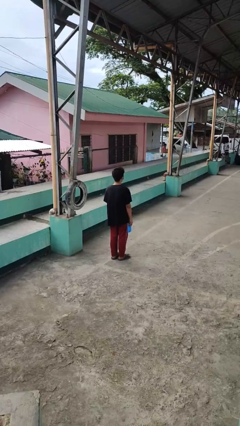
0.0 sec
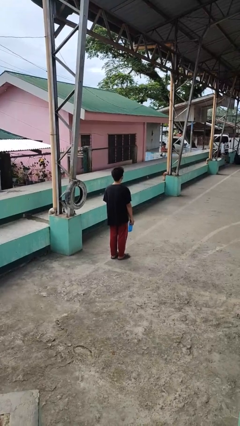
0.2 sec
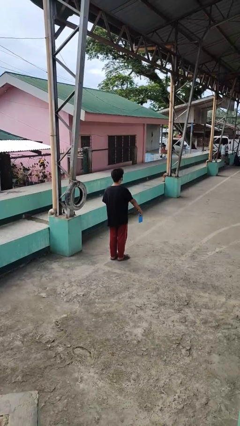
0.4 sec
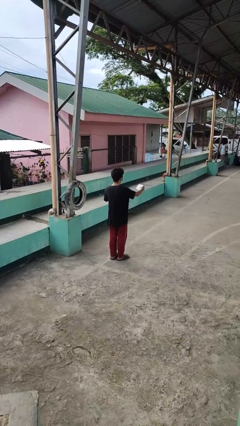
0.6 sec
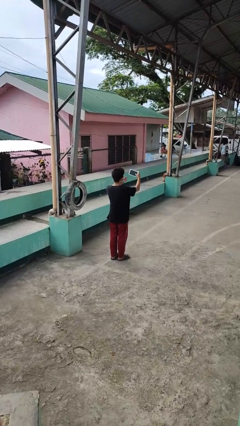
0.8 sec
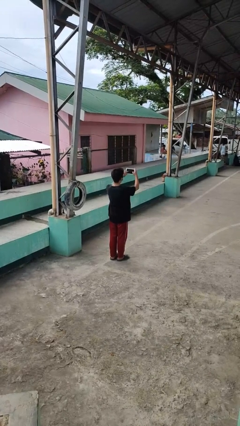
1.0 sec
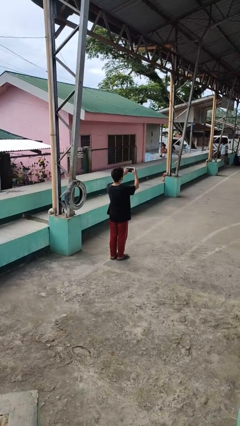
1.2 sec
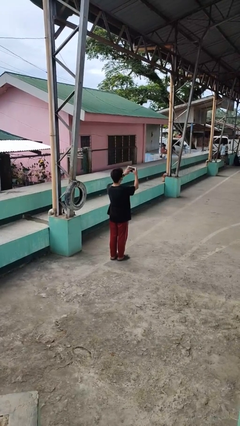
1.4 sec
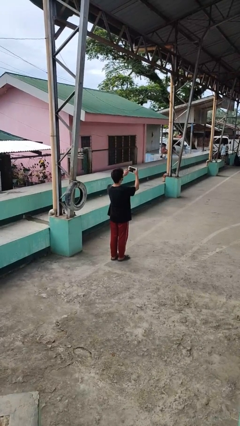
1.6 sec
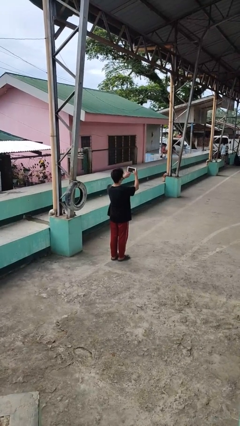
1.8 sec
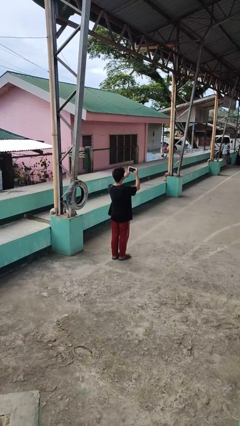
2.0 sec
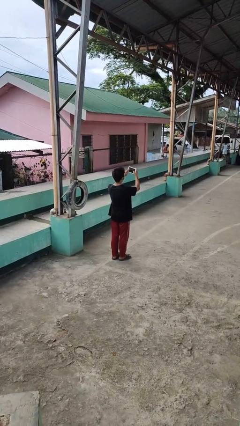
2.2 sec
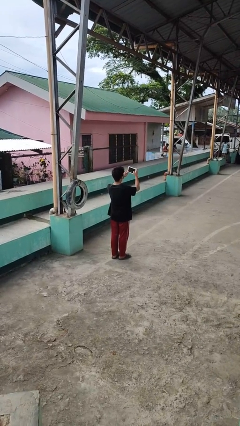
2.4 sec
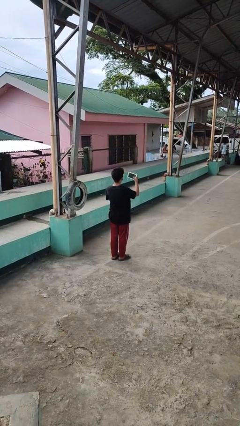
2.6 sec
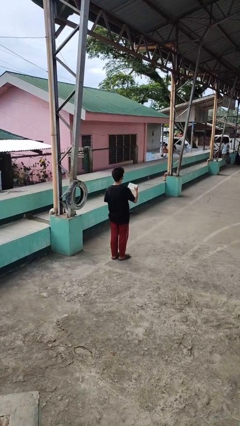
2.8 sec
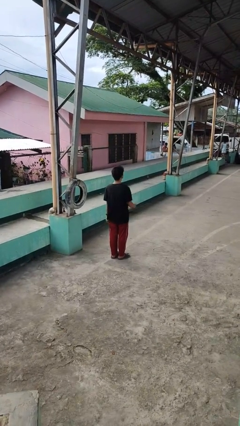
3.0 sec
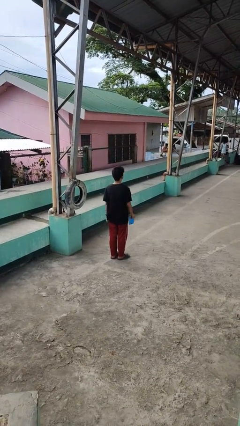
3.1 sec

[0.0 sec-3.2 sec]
person interacts with tablet

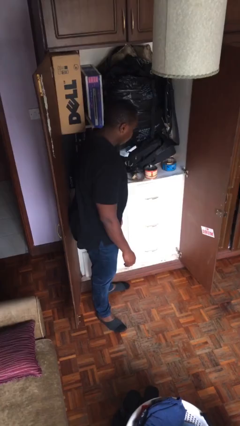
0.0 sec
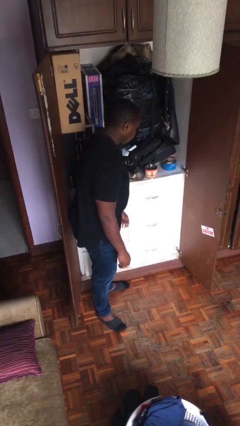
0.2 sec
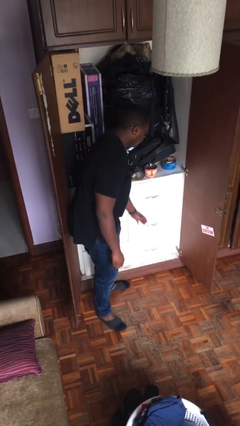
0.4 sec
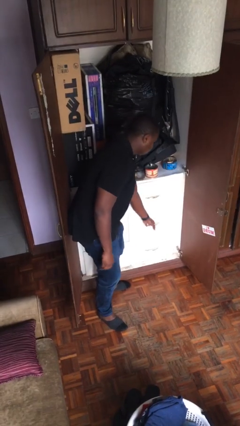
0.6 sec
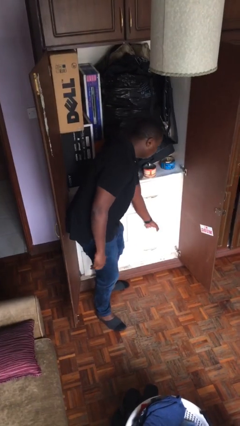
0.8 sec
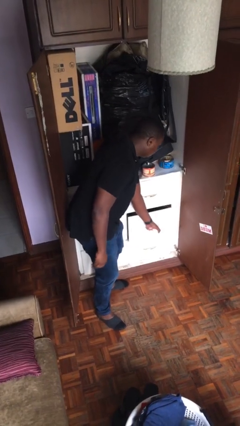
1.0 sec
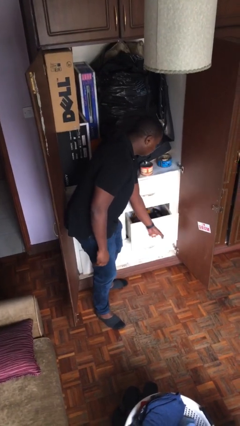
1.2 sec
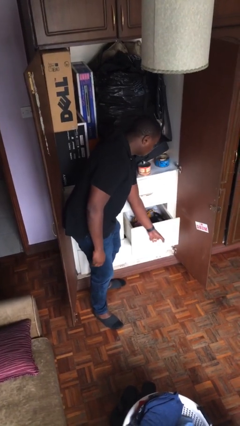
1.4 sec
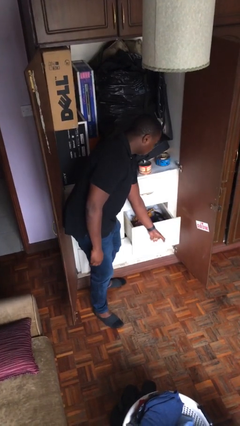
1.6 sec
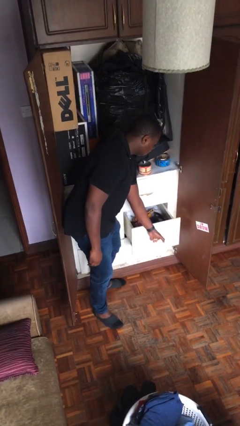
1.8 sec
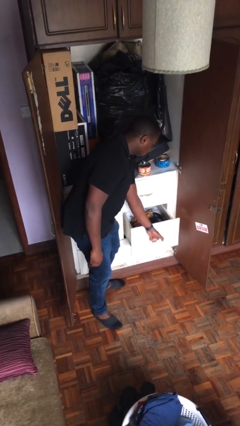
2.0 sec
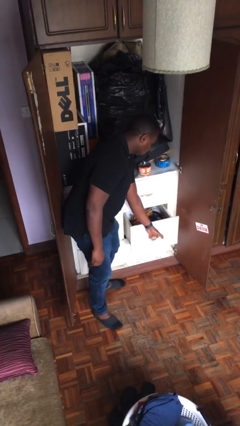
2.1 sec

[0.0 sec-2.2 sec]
person opens dresser drawer

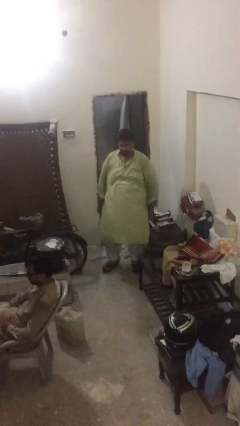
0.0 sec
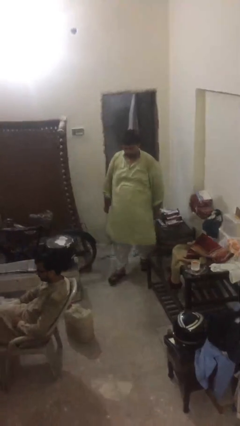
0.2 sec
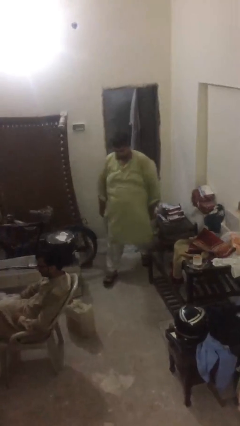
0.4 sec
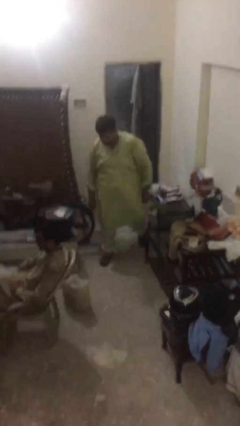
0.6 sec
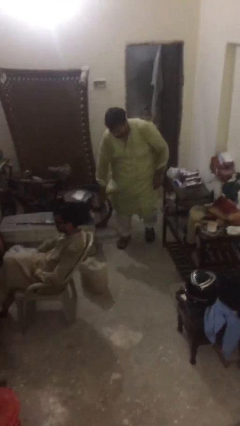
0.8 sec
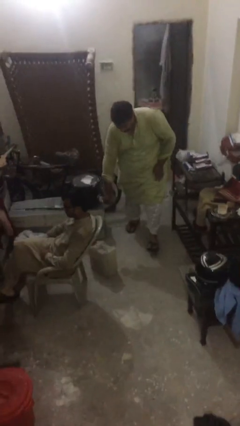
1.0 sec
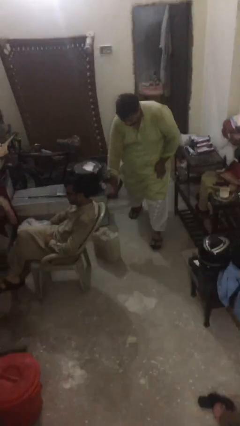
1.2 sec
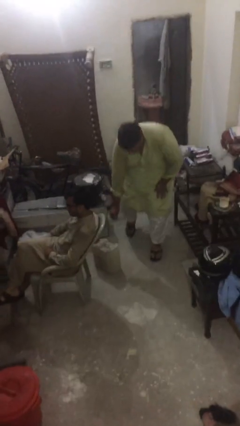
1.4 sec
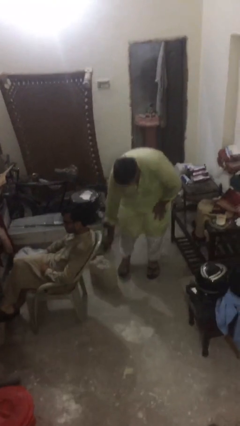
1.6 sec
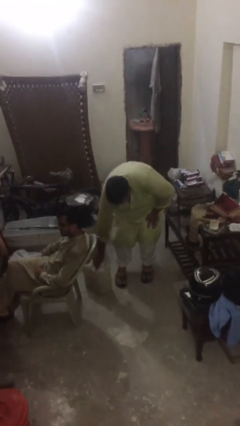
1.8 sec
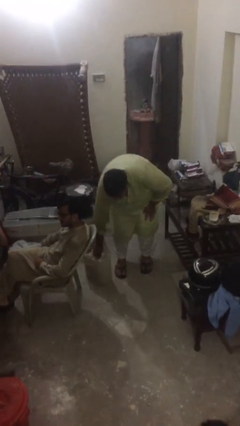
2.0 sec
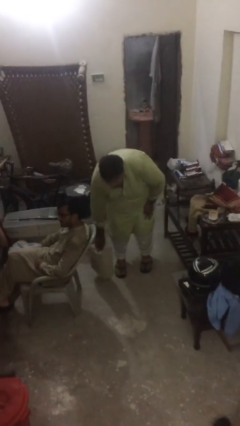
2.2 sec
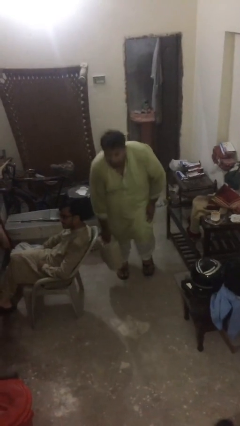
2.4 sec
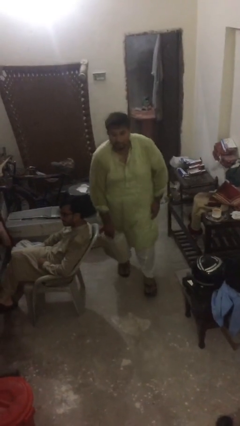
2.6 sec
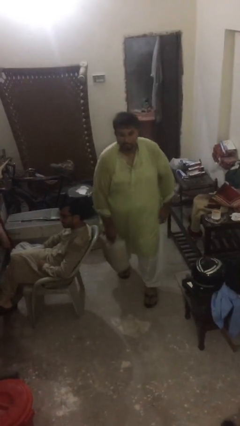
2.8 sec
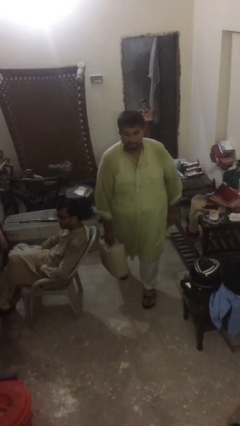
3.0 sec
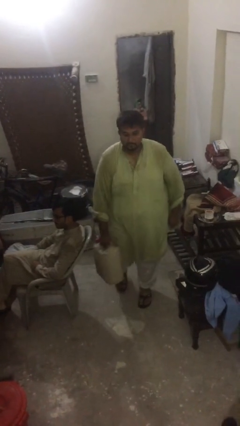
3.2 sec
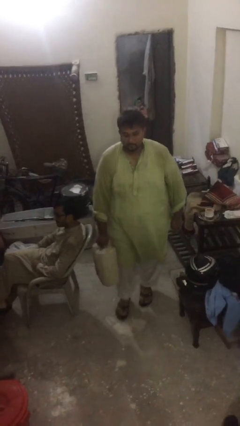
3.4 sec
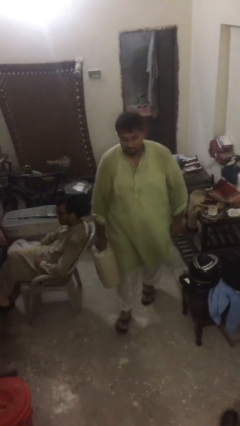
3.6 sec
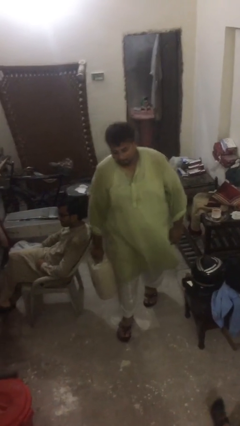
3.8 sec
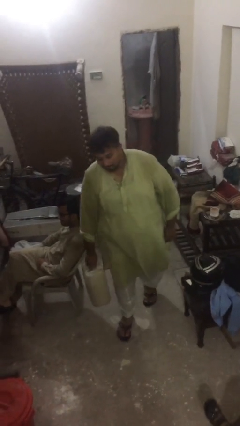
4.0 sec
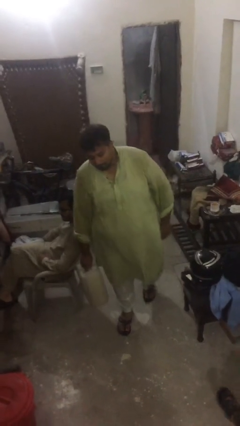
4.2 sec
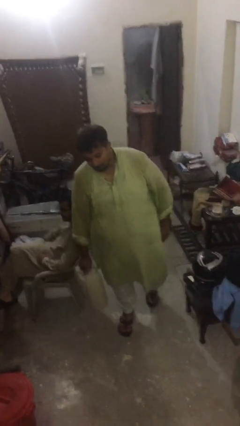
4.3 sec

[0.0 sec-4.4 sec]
person steals object from person

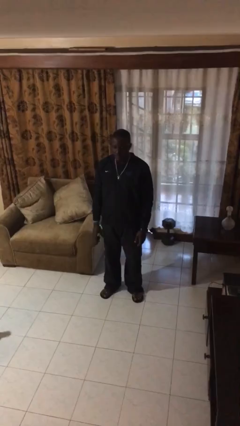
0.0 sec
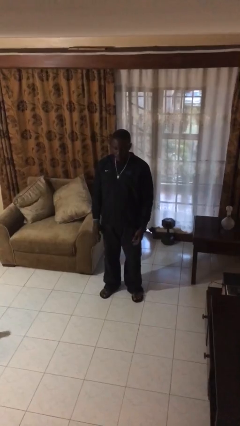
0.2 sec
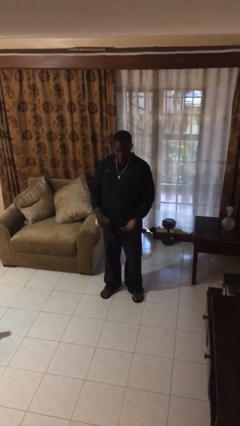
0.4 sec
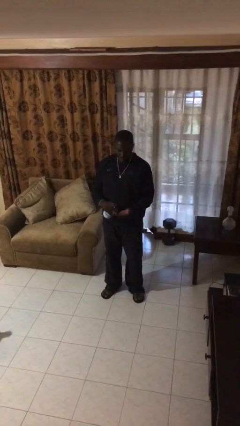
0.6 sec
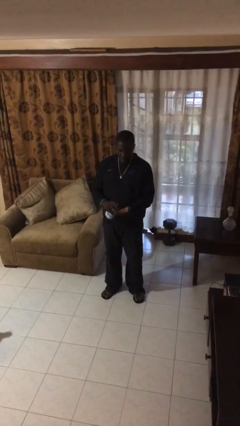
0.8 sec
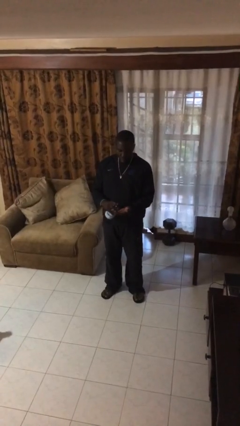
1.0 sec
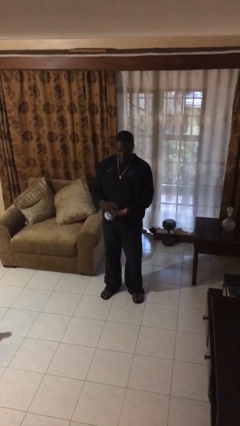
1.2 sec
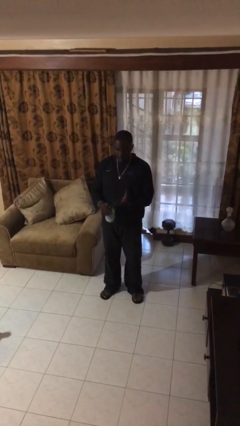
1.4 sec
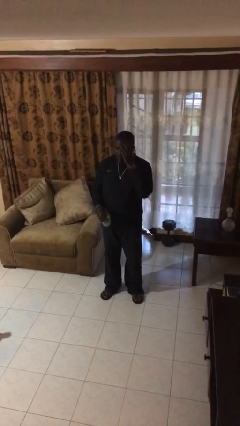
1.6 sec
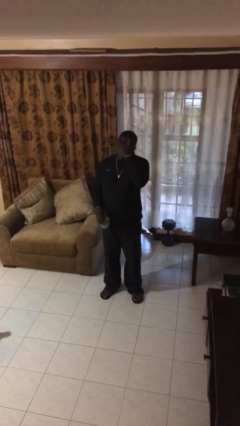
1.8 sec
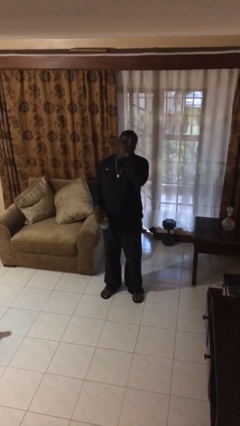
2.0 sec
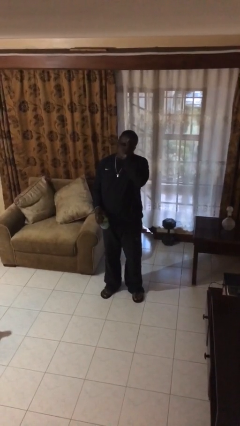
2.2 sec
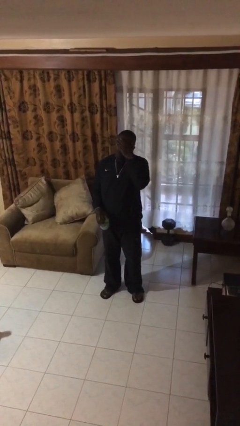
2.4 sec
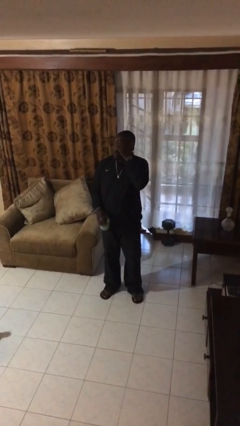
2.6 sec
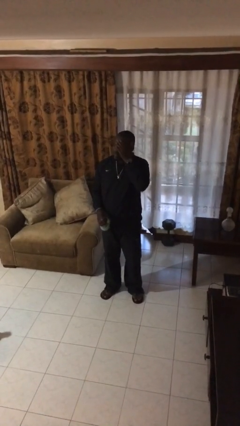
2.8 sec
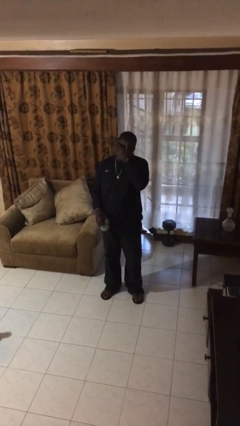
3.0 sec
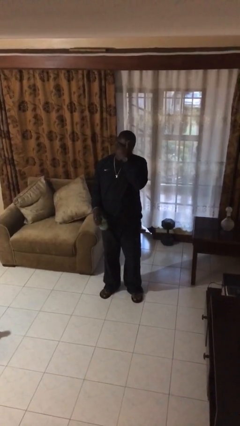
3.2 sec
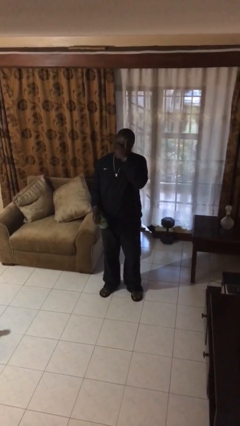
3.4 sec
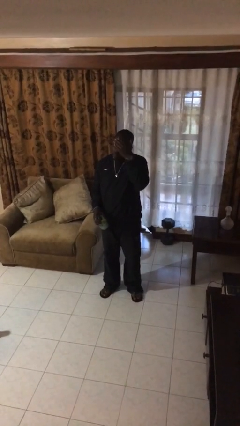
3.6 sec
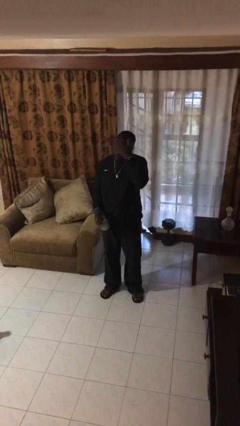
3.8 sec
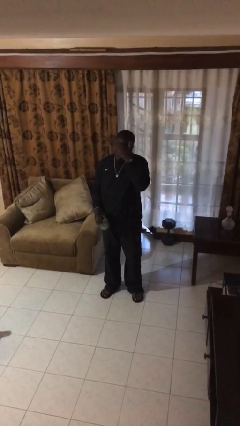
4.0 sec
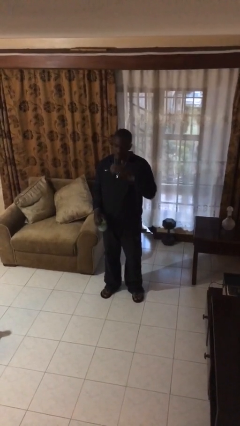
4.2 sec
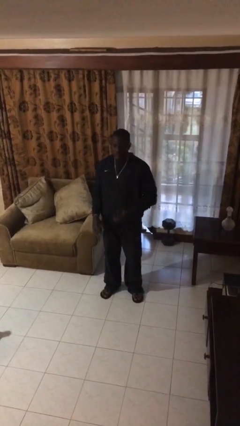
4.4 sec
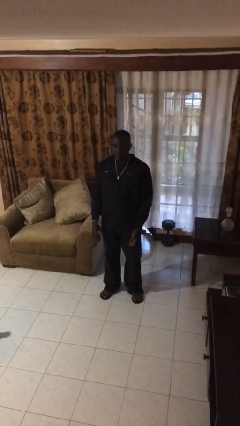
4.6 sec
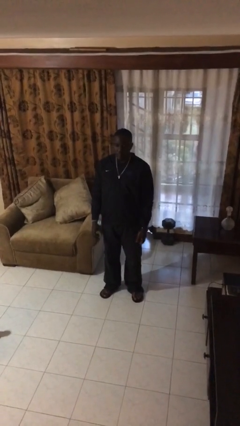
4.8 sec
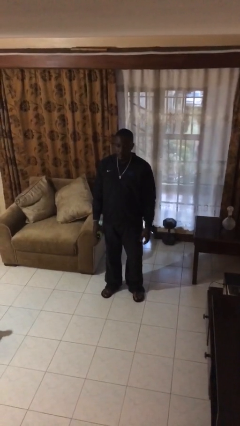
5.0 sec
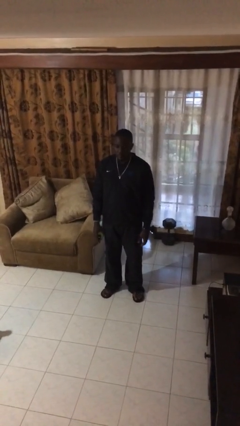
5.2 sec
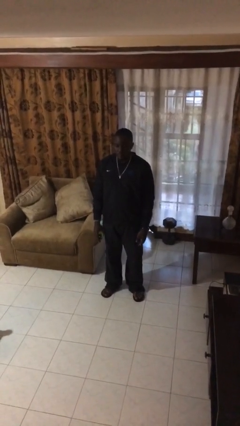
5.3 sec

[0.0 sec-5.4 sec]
person applies facial moisturizer

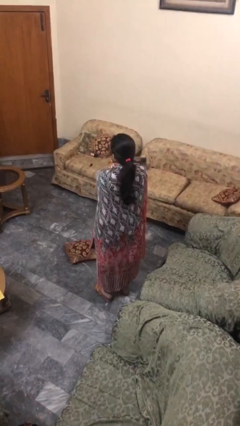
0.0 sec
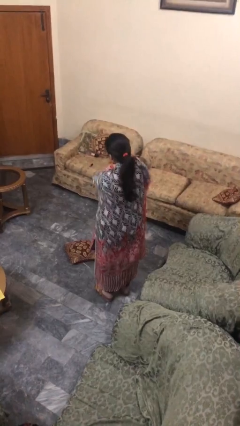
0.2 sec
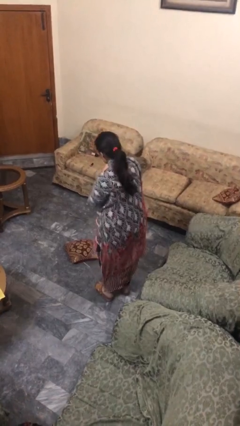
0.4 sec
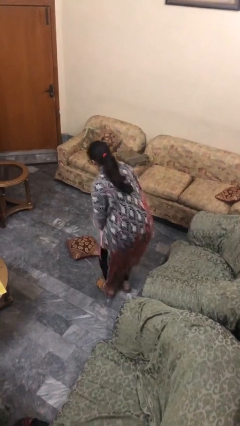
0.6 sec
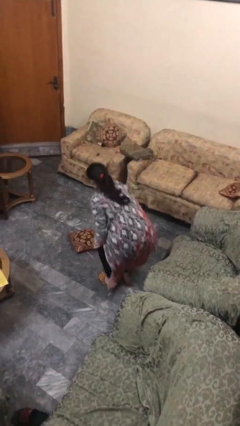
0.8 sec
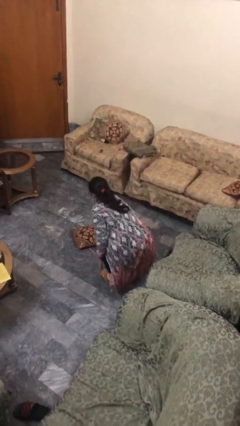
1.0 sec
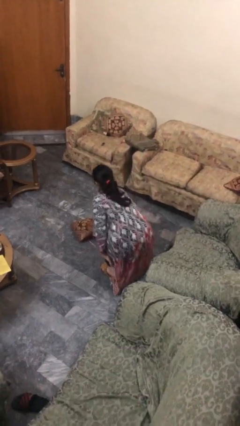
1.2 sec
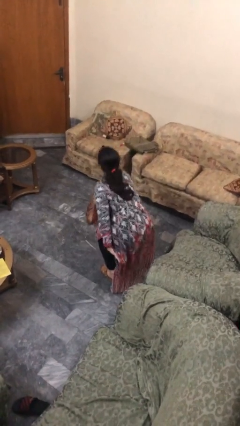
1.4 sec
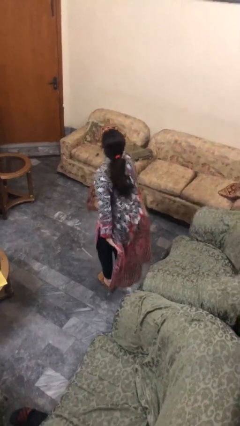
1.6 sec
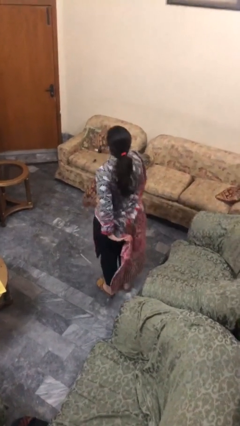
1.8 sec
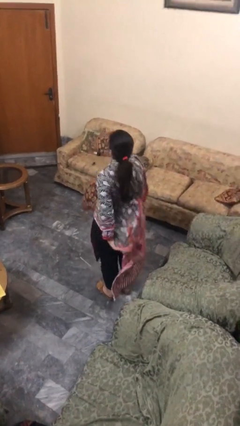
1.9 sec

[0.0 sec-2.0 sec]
person picks up object from floor
